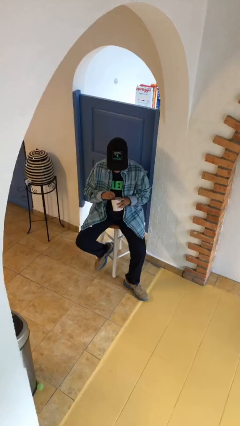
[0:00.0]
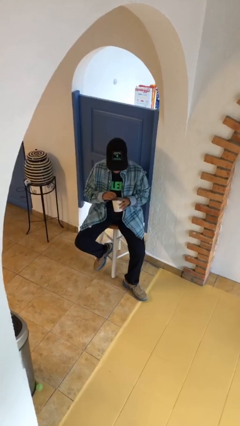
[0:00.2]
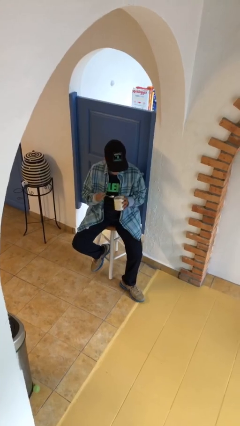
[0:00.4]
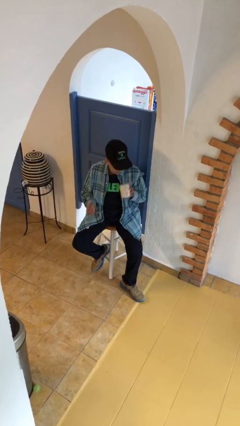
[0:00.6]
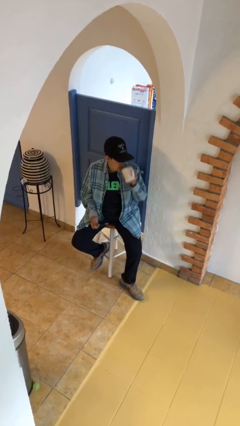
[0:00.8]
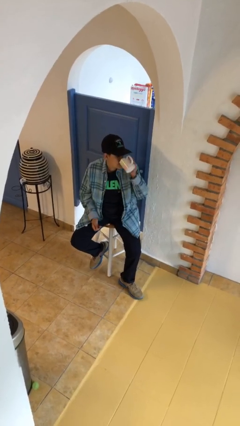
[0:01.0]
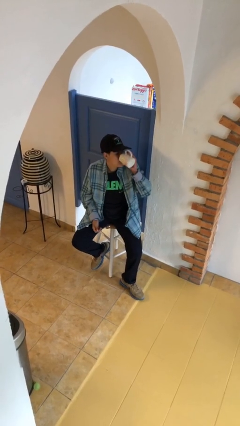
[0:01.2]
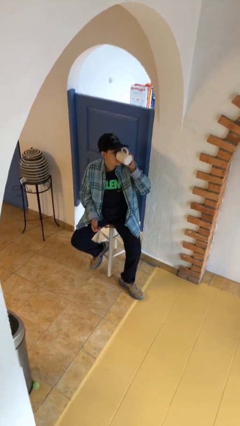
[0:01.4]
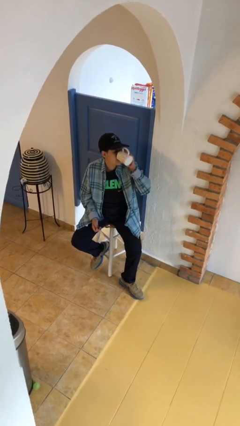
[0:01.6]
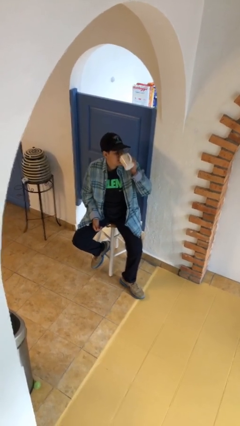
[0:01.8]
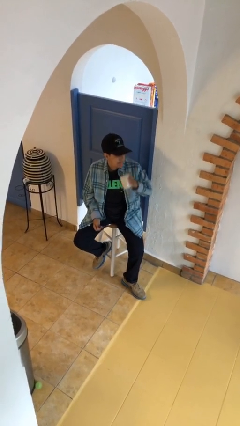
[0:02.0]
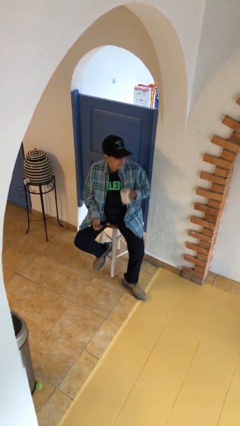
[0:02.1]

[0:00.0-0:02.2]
person drinks from mug

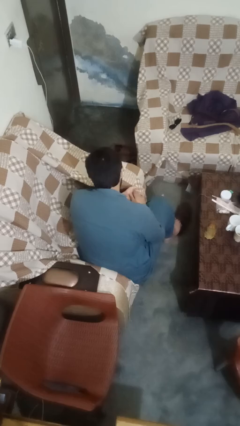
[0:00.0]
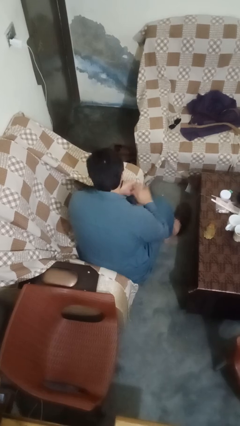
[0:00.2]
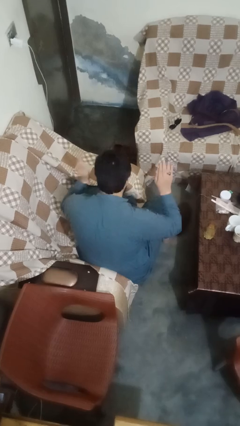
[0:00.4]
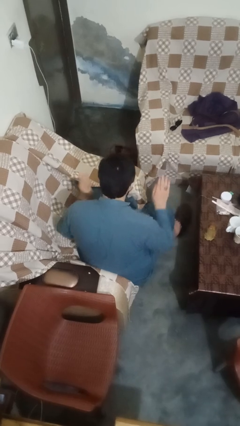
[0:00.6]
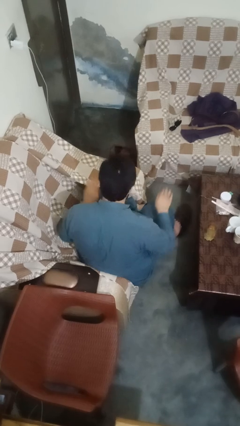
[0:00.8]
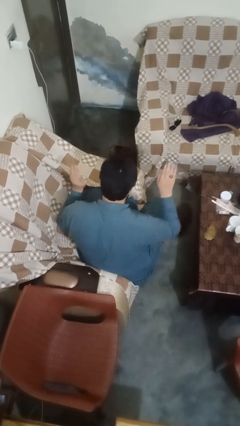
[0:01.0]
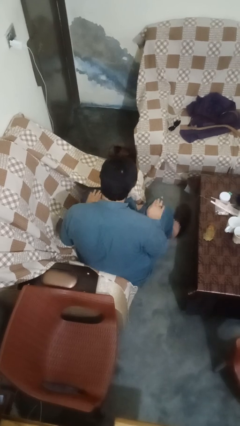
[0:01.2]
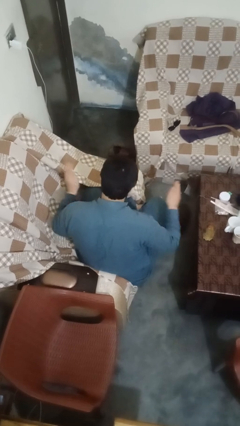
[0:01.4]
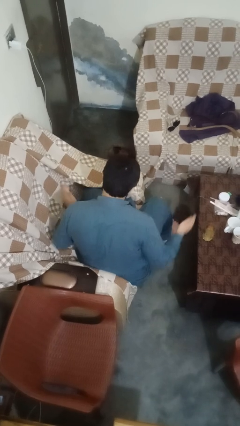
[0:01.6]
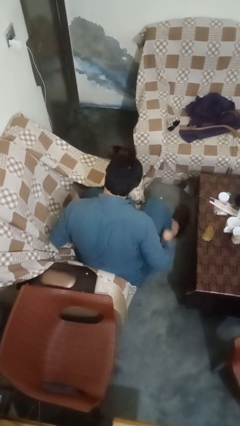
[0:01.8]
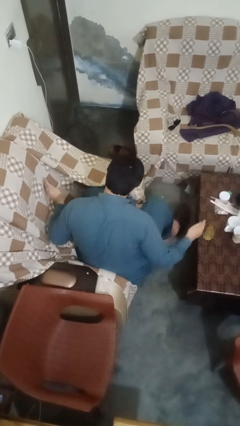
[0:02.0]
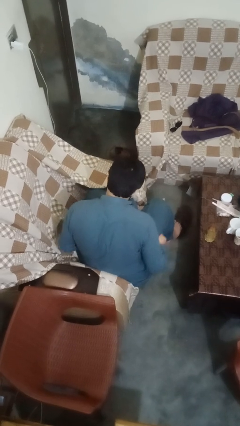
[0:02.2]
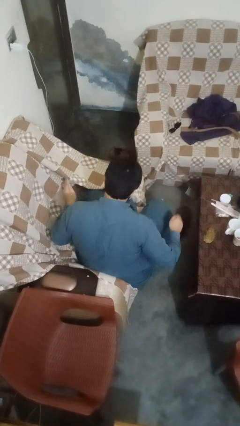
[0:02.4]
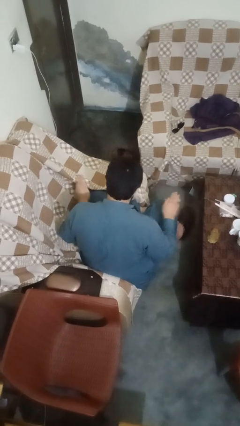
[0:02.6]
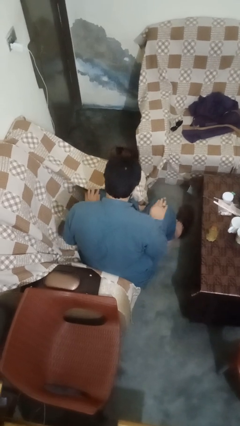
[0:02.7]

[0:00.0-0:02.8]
person slaps hands on thighs

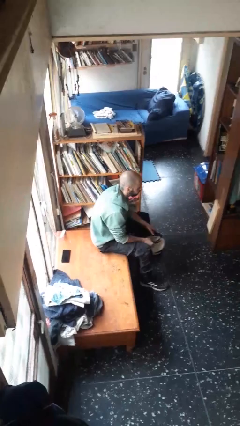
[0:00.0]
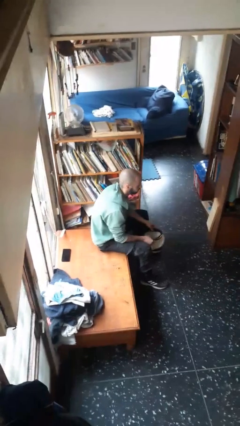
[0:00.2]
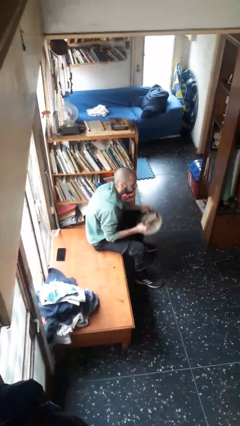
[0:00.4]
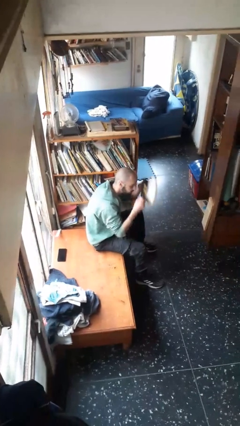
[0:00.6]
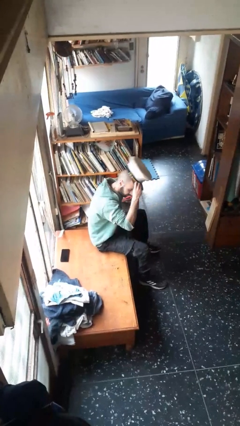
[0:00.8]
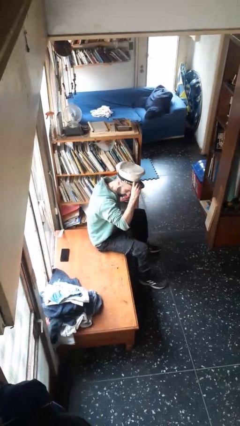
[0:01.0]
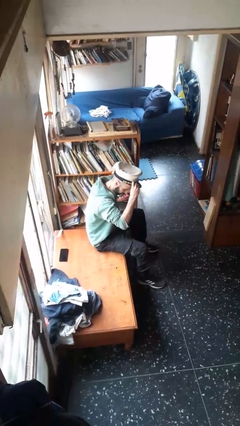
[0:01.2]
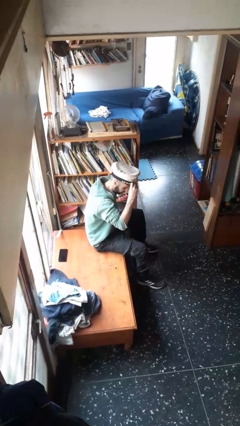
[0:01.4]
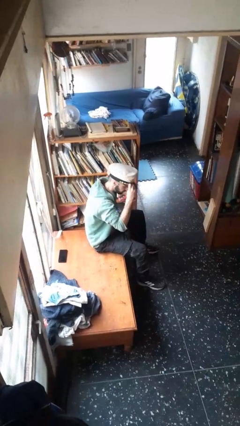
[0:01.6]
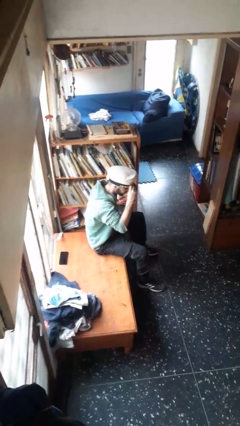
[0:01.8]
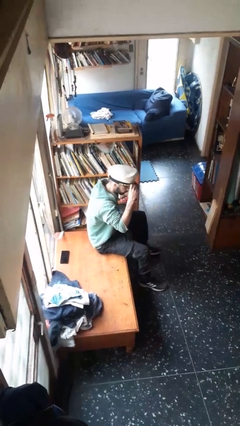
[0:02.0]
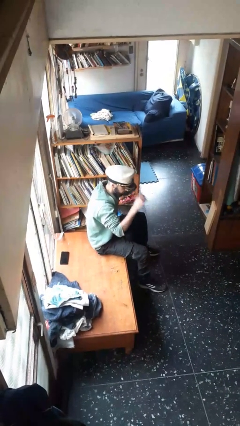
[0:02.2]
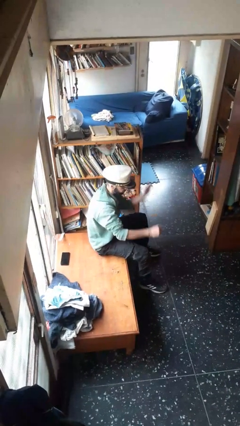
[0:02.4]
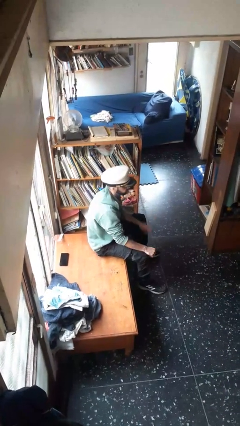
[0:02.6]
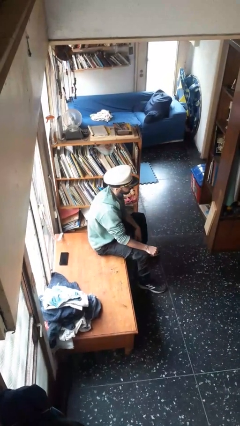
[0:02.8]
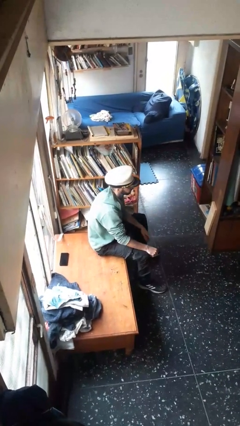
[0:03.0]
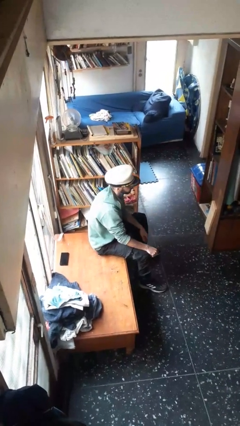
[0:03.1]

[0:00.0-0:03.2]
person puts on hat

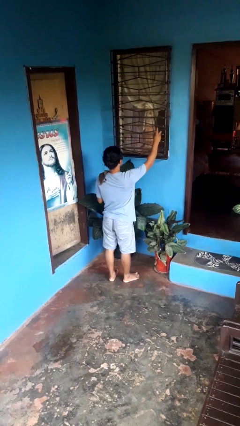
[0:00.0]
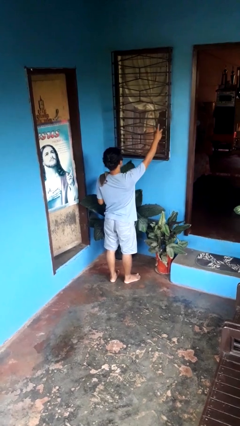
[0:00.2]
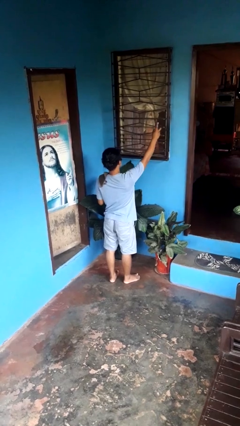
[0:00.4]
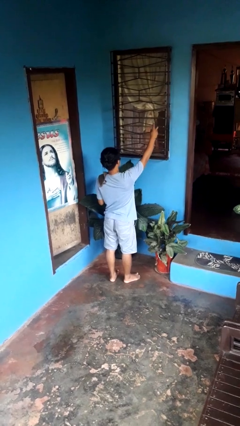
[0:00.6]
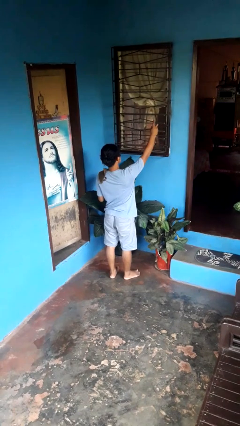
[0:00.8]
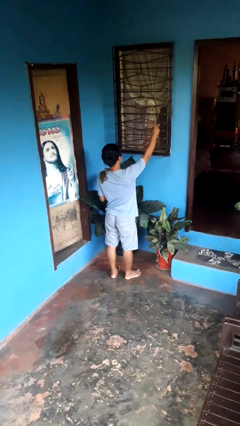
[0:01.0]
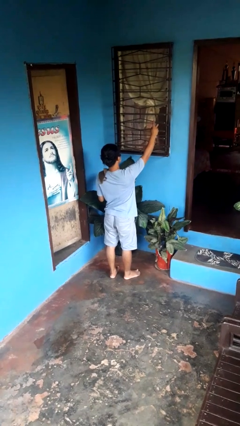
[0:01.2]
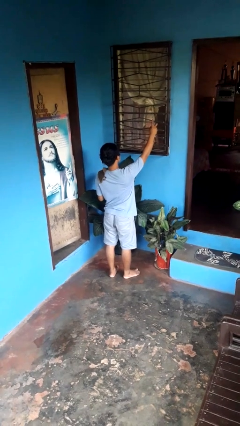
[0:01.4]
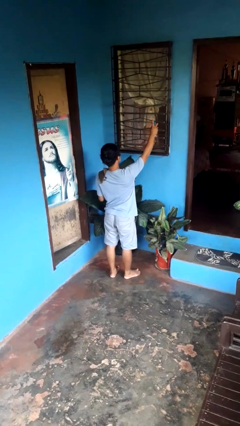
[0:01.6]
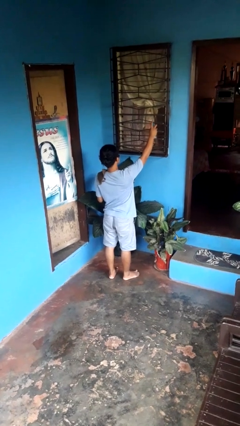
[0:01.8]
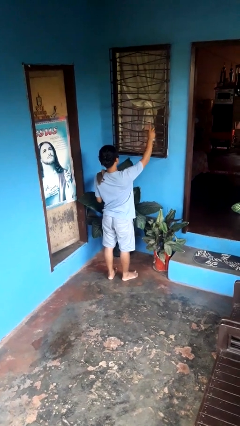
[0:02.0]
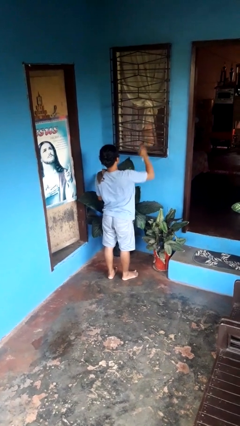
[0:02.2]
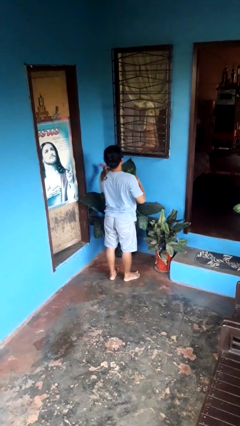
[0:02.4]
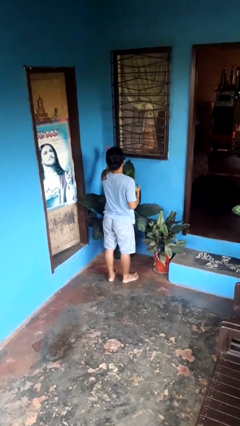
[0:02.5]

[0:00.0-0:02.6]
person sprays from bottle

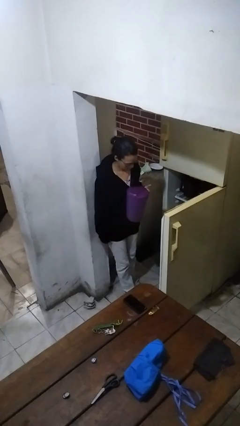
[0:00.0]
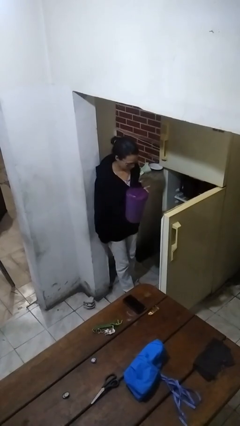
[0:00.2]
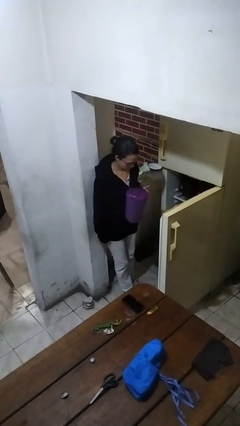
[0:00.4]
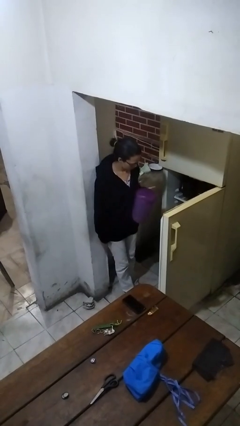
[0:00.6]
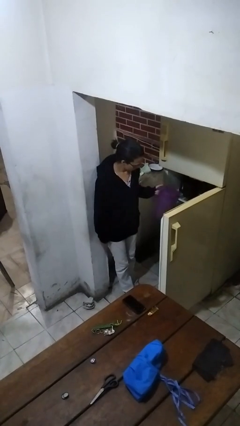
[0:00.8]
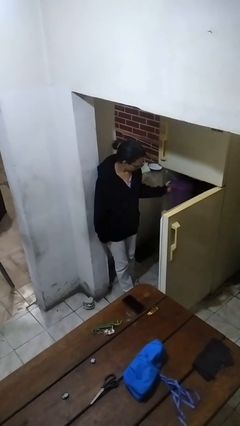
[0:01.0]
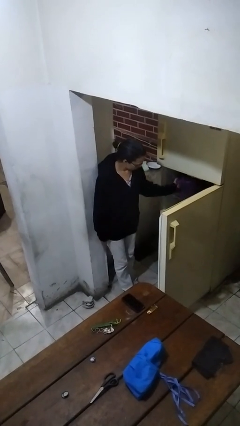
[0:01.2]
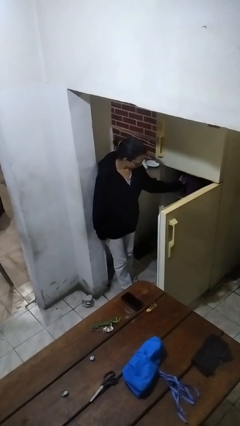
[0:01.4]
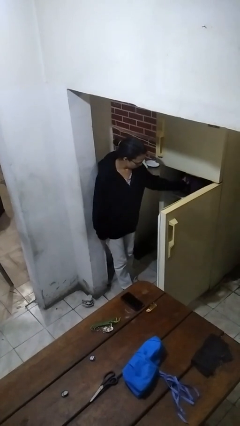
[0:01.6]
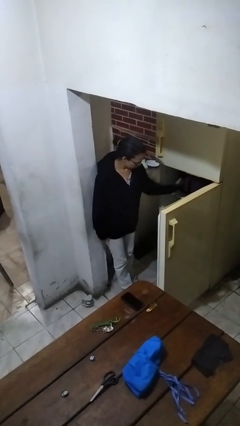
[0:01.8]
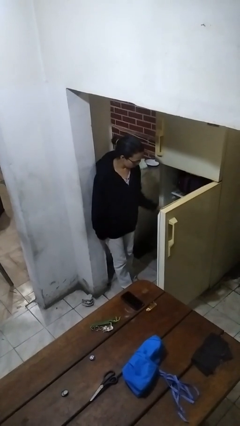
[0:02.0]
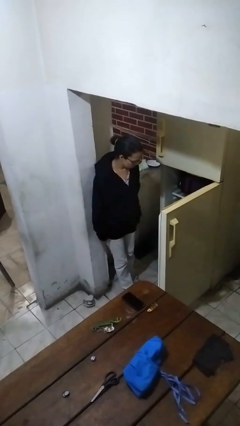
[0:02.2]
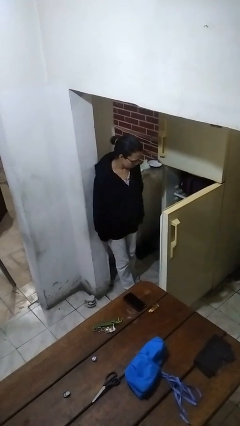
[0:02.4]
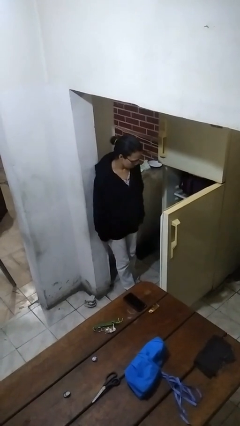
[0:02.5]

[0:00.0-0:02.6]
person puts object into refrigerator

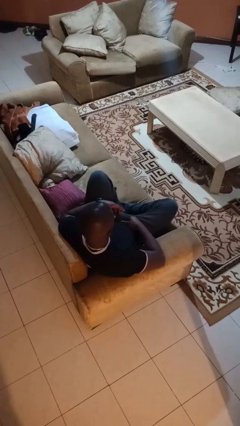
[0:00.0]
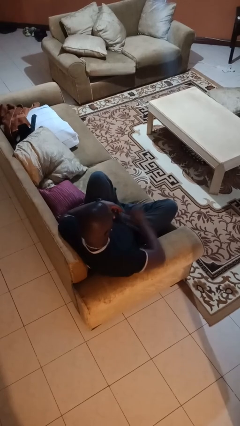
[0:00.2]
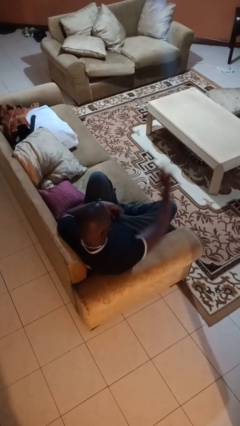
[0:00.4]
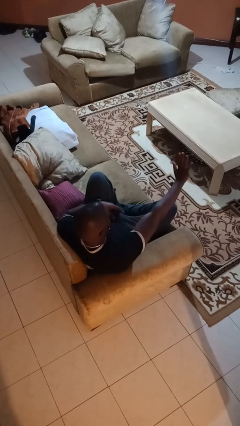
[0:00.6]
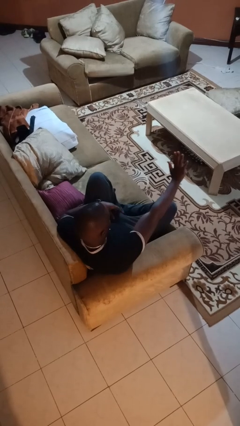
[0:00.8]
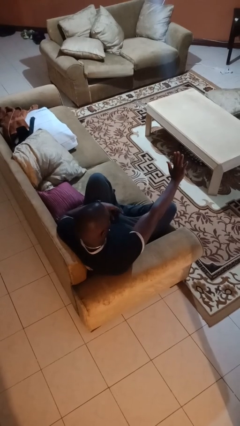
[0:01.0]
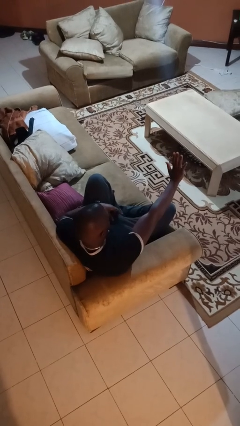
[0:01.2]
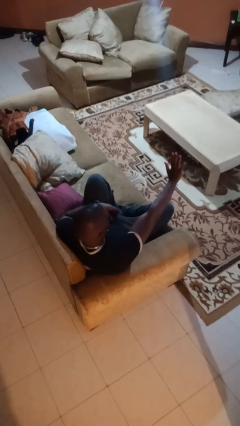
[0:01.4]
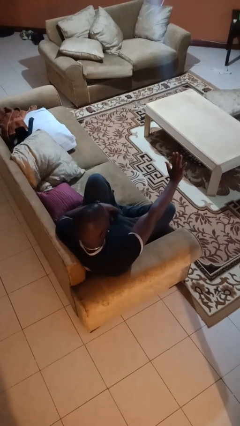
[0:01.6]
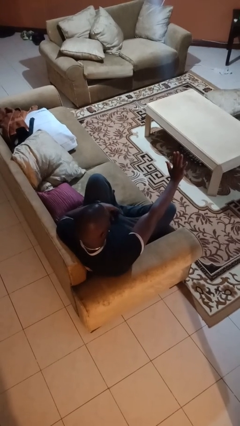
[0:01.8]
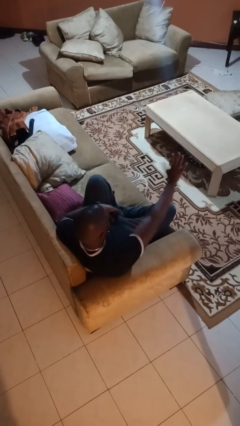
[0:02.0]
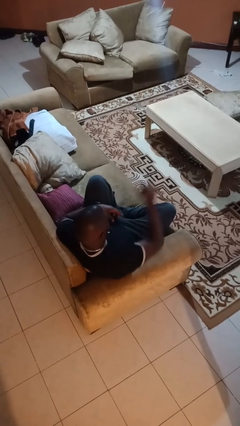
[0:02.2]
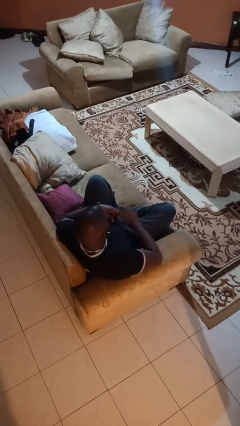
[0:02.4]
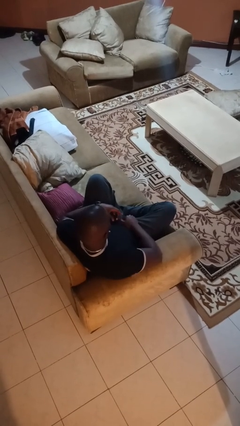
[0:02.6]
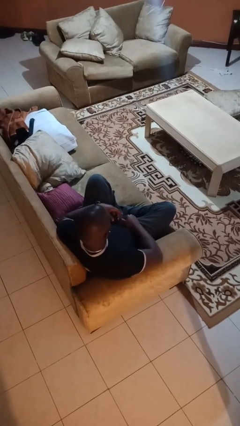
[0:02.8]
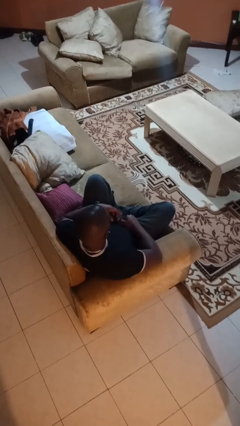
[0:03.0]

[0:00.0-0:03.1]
person gestures stop

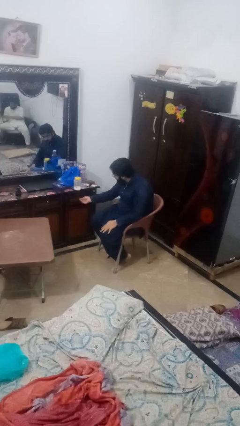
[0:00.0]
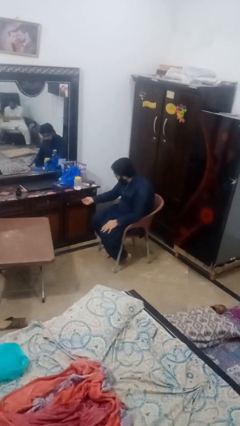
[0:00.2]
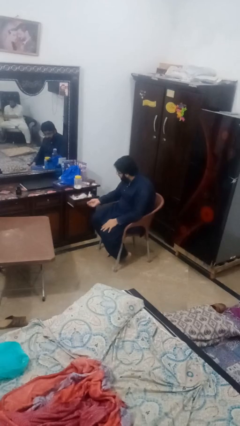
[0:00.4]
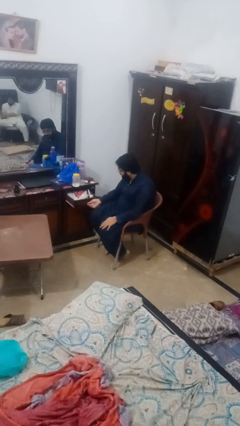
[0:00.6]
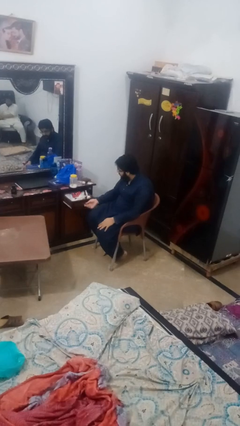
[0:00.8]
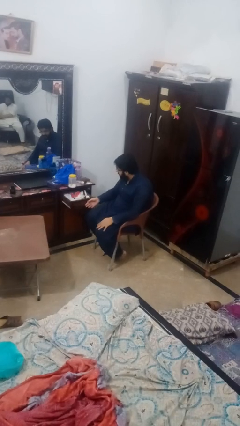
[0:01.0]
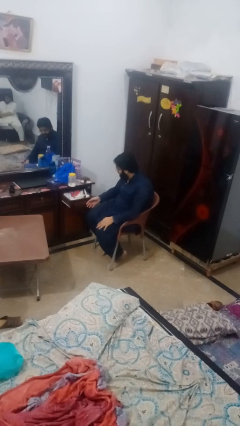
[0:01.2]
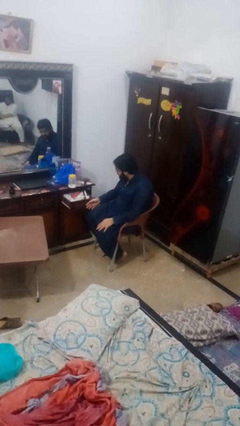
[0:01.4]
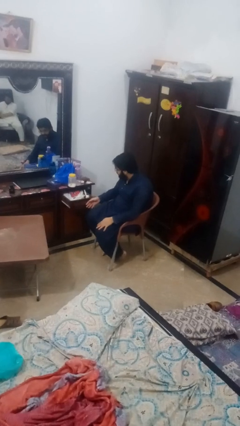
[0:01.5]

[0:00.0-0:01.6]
person opens dresser drawer
